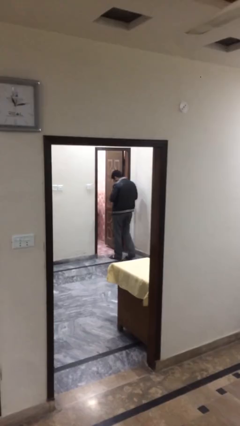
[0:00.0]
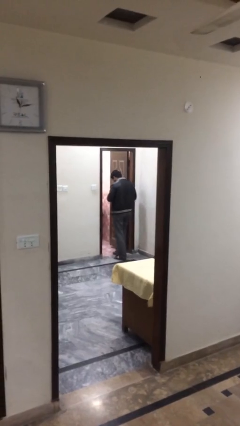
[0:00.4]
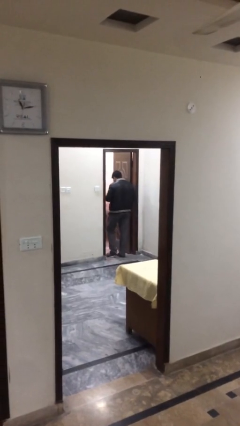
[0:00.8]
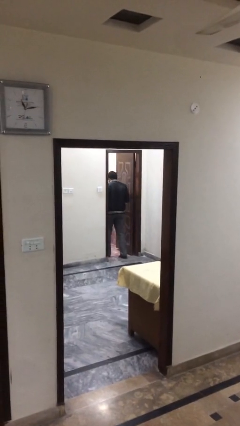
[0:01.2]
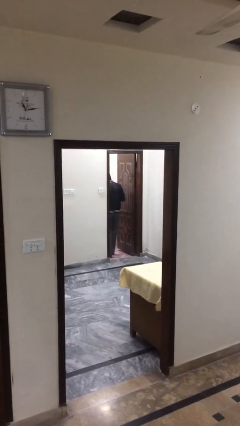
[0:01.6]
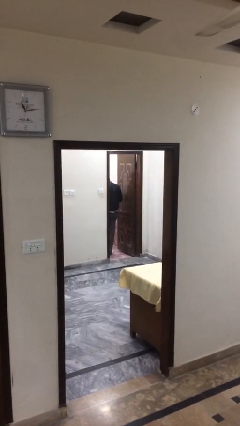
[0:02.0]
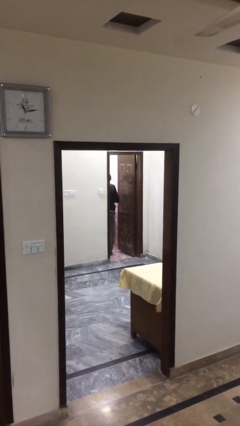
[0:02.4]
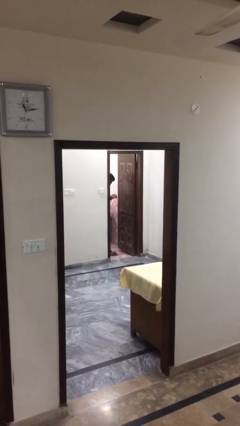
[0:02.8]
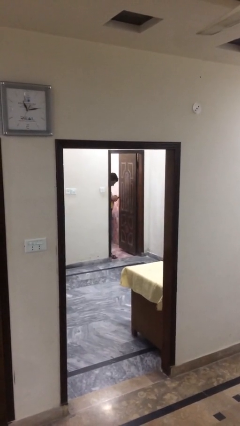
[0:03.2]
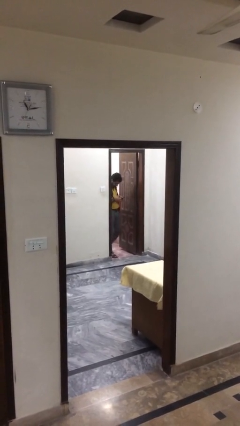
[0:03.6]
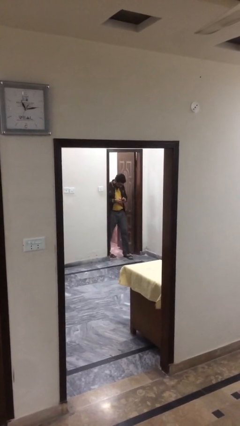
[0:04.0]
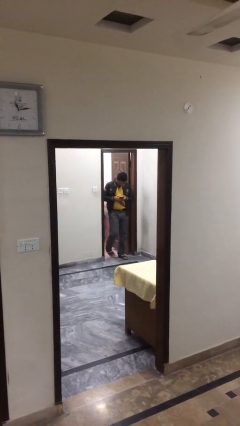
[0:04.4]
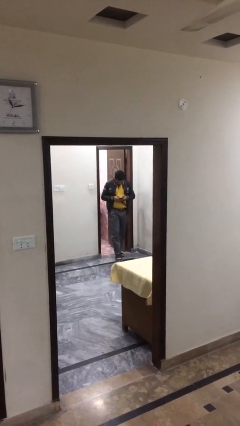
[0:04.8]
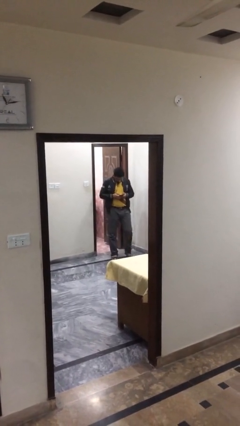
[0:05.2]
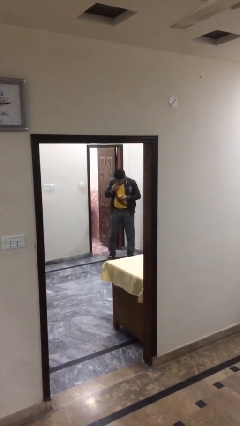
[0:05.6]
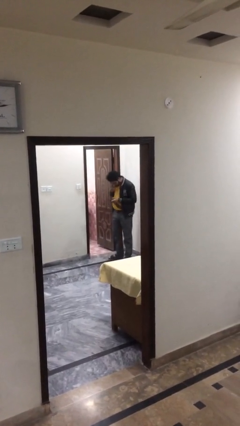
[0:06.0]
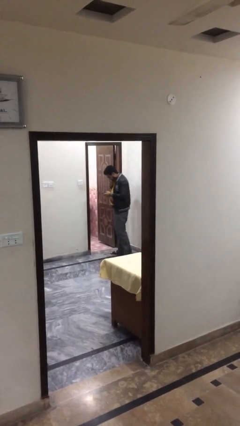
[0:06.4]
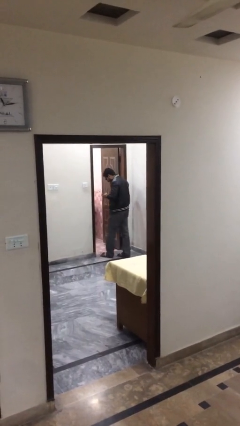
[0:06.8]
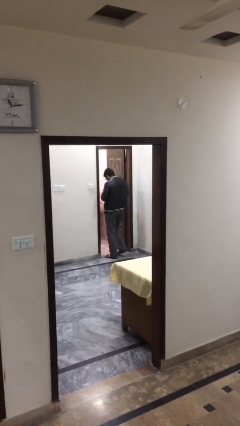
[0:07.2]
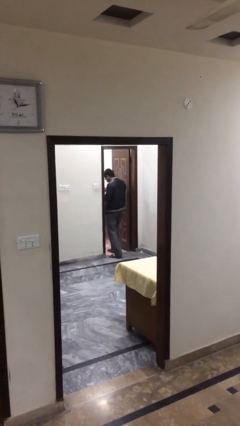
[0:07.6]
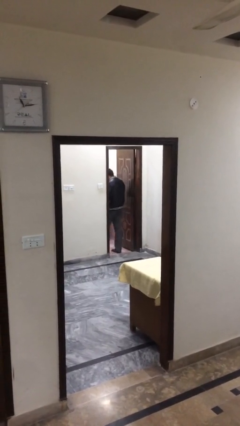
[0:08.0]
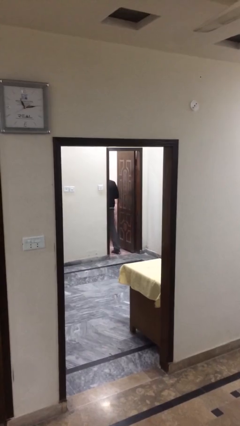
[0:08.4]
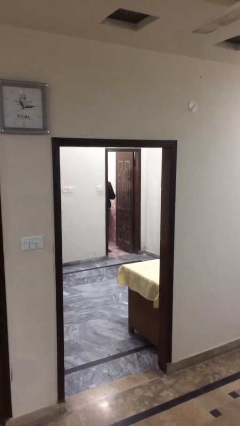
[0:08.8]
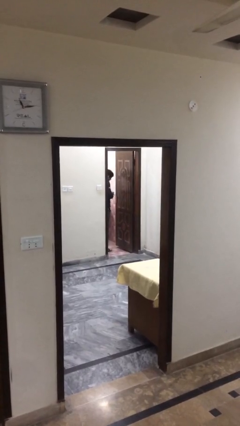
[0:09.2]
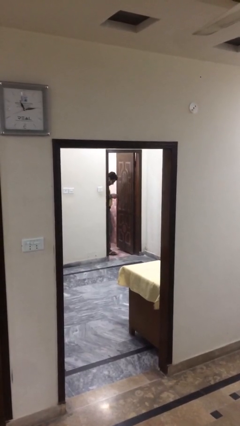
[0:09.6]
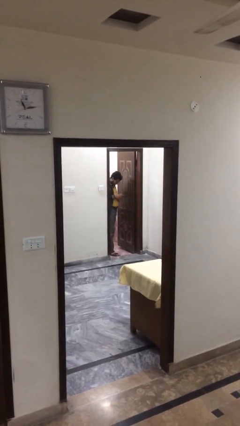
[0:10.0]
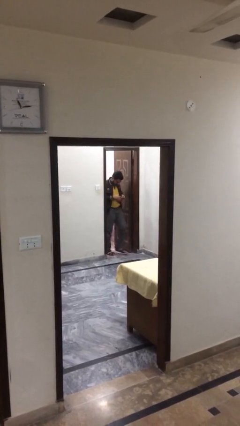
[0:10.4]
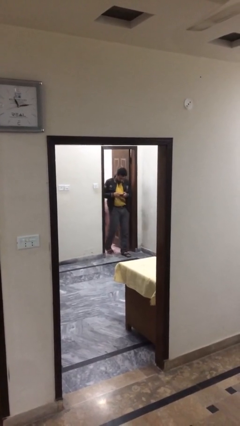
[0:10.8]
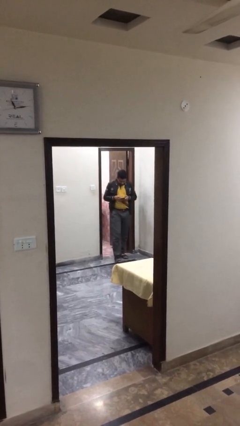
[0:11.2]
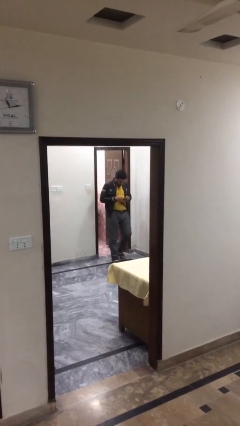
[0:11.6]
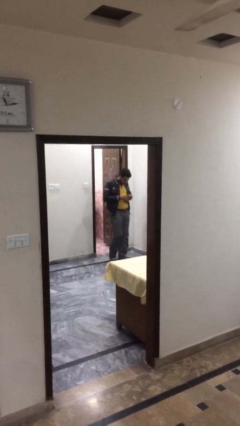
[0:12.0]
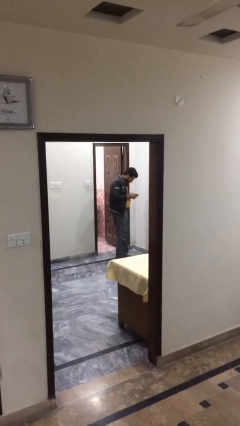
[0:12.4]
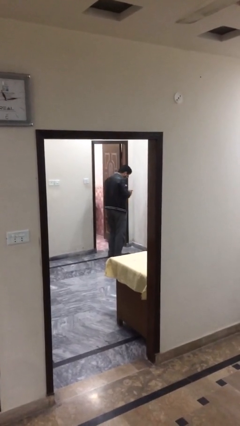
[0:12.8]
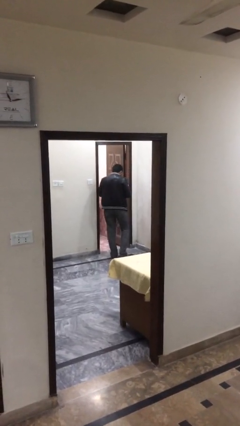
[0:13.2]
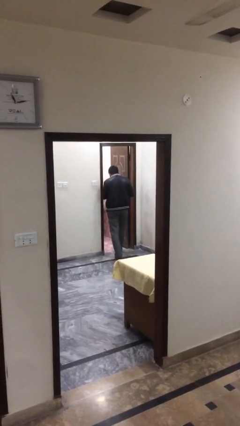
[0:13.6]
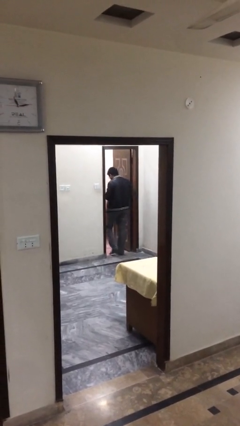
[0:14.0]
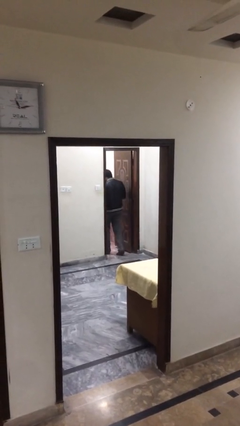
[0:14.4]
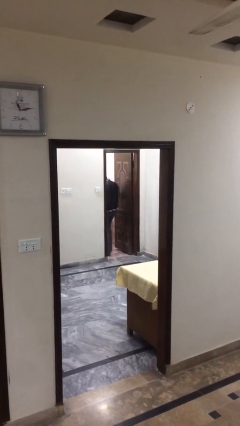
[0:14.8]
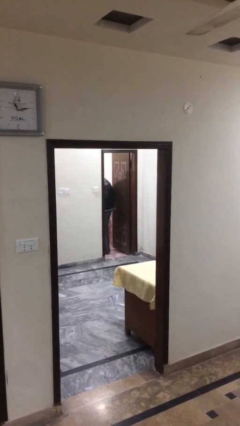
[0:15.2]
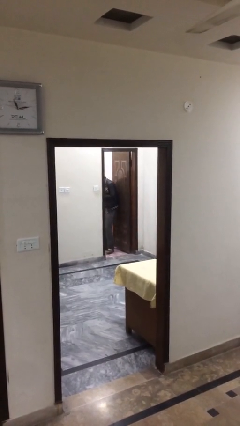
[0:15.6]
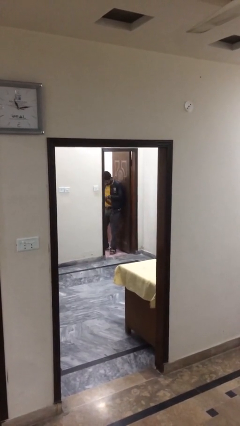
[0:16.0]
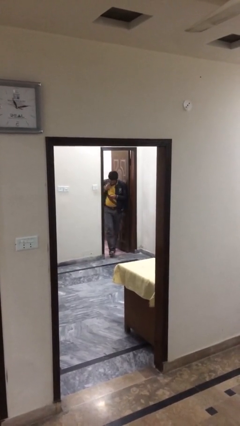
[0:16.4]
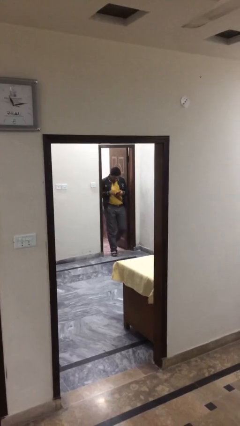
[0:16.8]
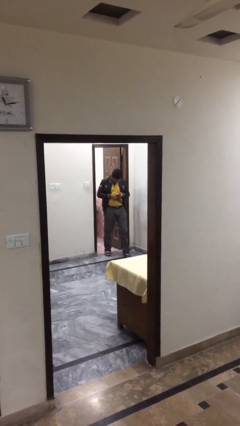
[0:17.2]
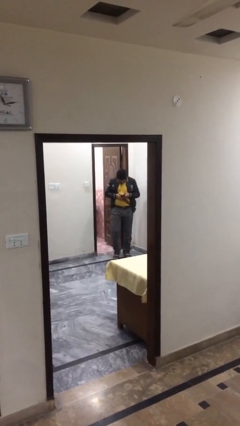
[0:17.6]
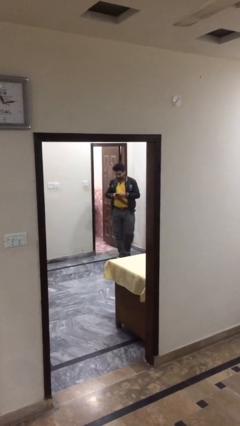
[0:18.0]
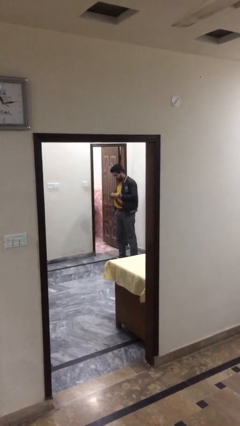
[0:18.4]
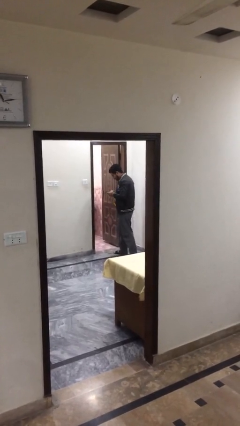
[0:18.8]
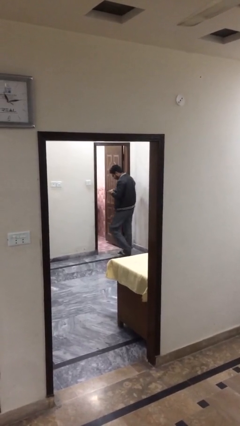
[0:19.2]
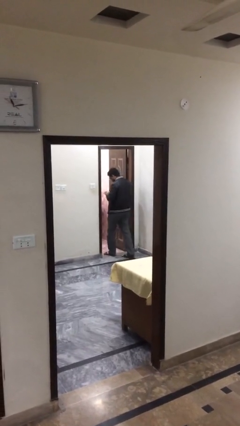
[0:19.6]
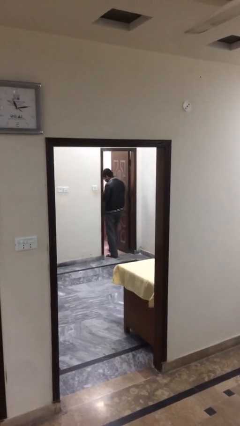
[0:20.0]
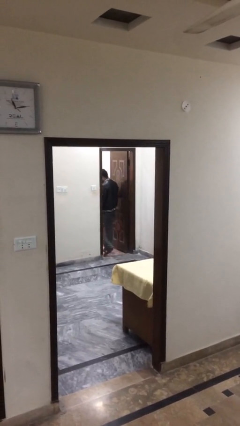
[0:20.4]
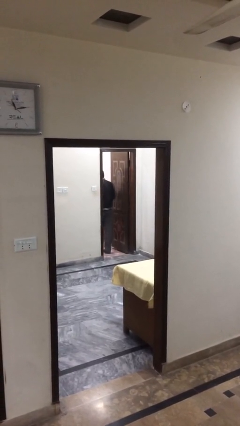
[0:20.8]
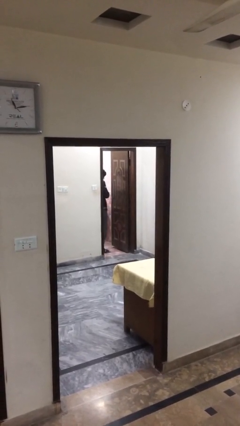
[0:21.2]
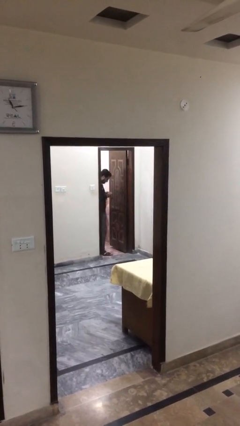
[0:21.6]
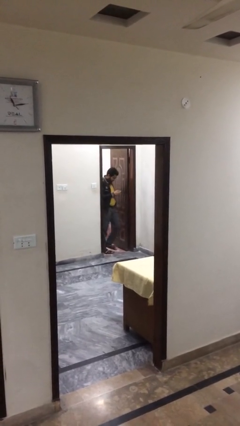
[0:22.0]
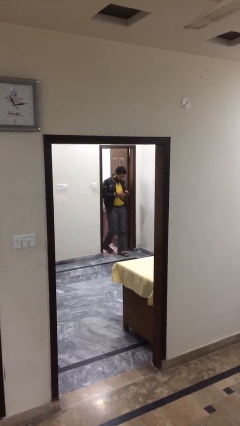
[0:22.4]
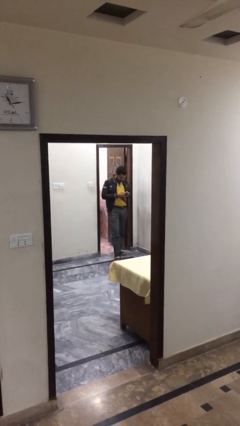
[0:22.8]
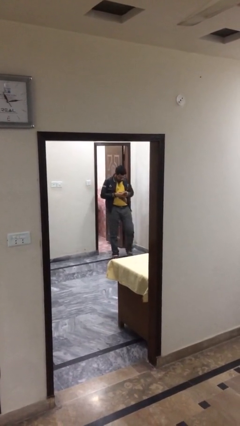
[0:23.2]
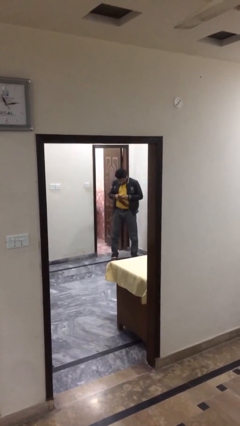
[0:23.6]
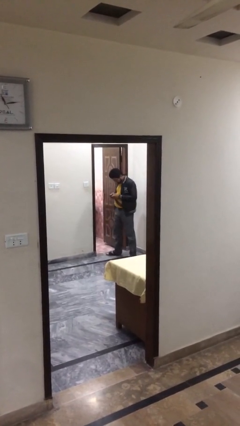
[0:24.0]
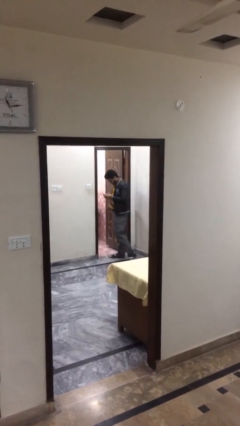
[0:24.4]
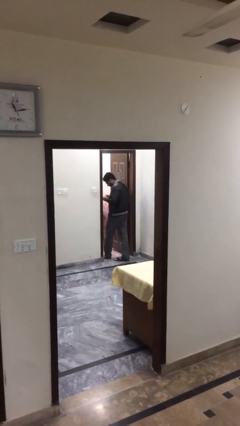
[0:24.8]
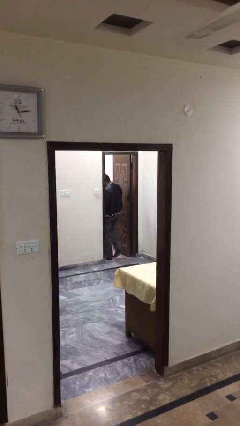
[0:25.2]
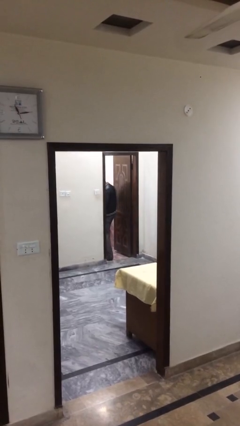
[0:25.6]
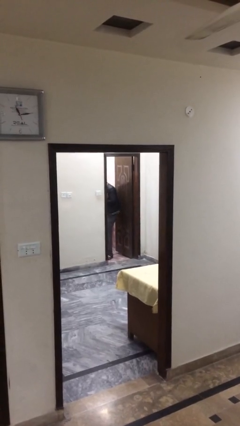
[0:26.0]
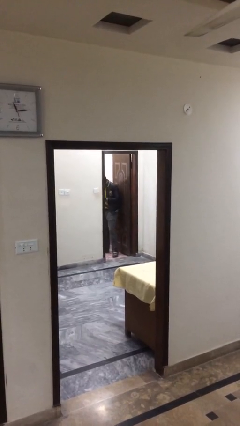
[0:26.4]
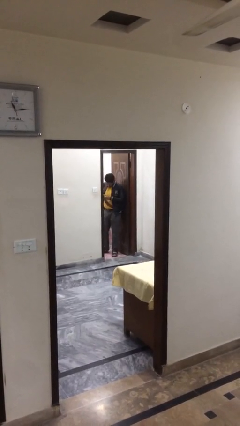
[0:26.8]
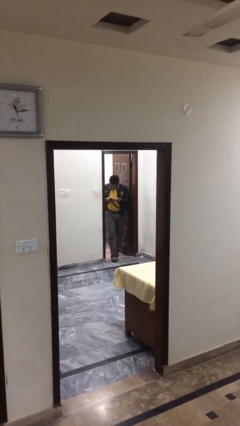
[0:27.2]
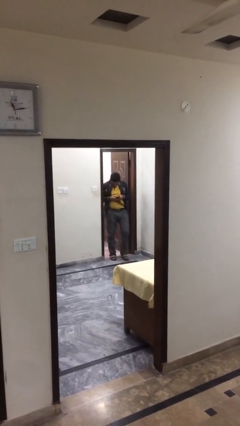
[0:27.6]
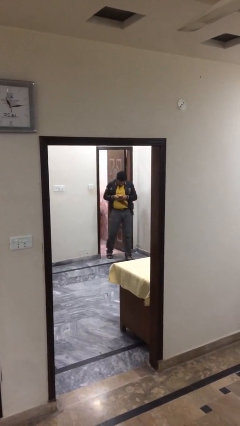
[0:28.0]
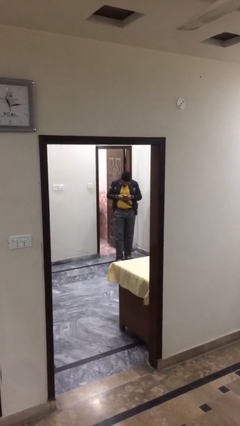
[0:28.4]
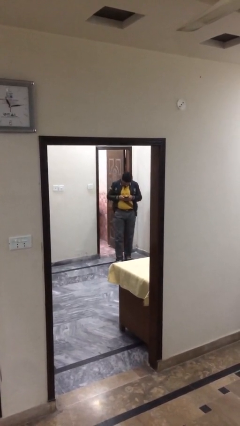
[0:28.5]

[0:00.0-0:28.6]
person texts on phone

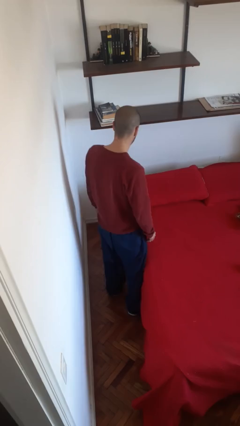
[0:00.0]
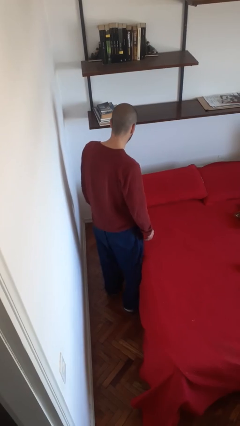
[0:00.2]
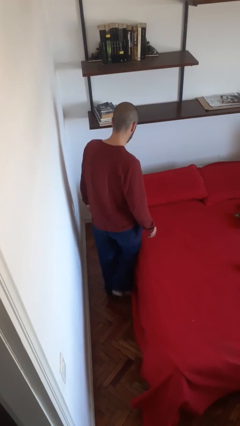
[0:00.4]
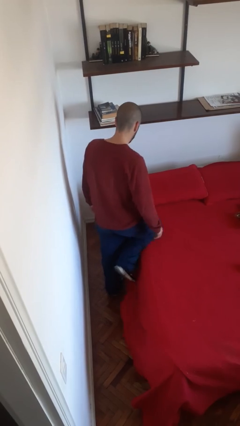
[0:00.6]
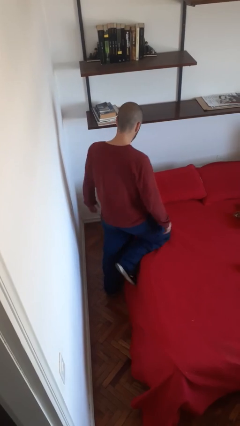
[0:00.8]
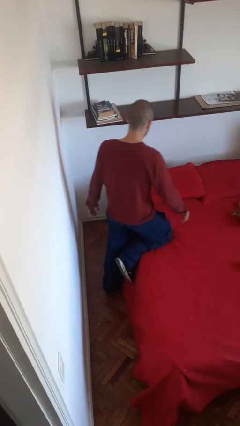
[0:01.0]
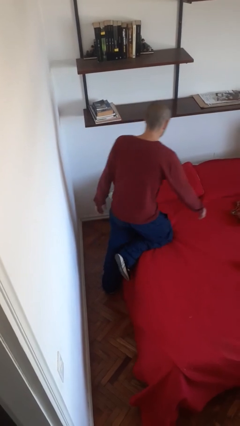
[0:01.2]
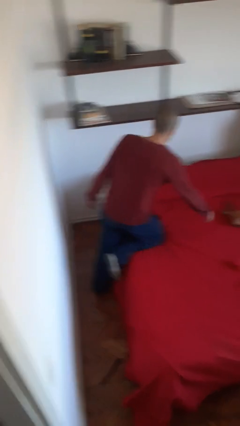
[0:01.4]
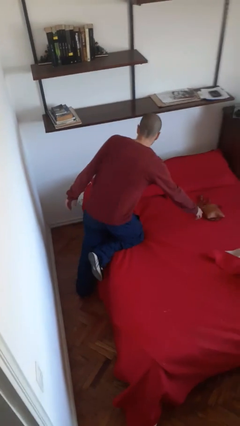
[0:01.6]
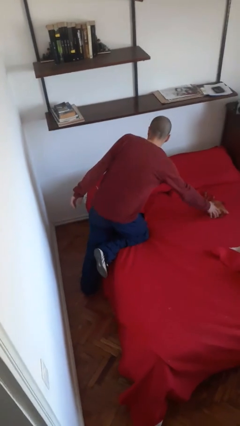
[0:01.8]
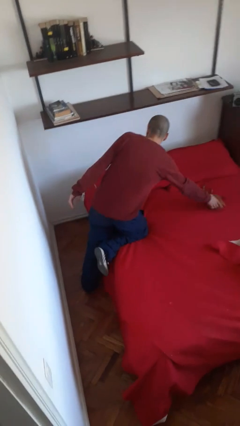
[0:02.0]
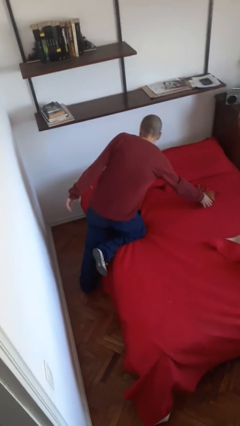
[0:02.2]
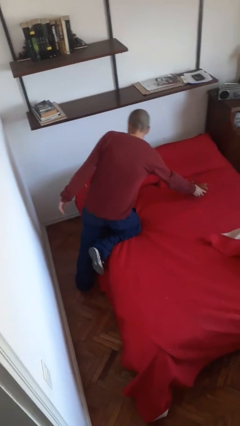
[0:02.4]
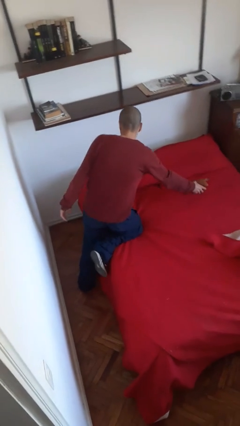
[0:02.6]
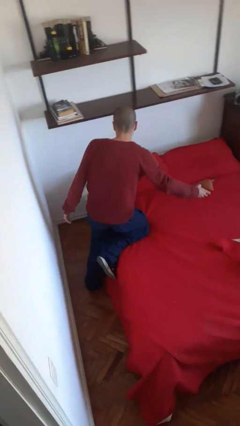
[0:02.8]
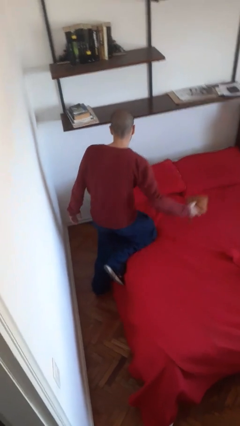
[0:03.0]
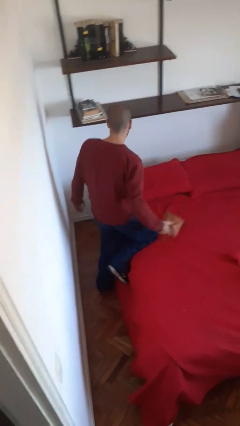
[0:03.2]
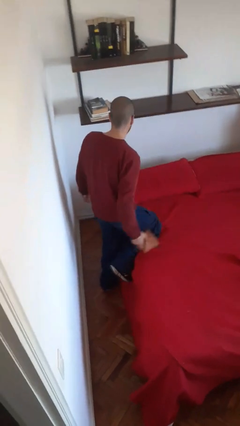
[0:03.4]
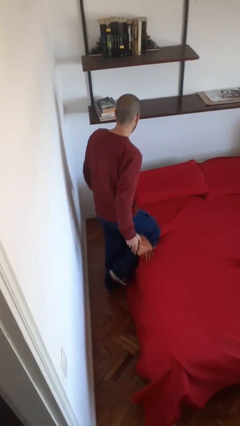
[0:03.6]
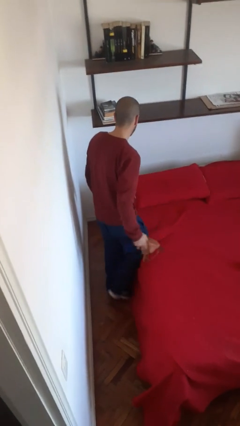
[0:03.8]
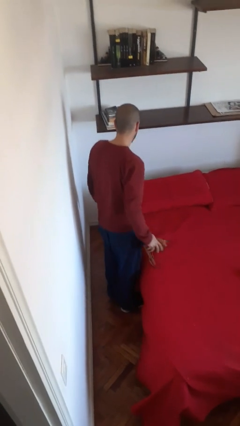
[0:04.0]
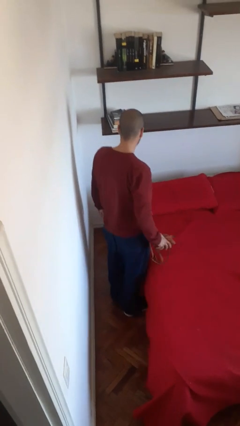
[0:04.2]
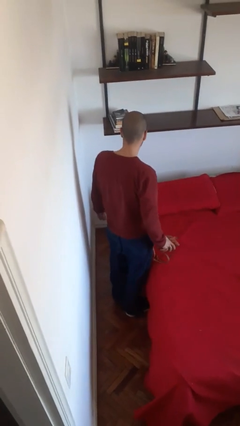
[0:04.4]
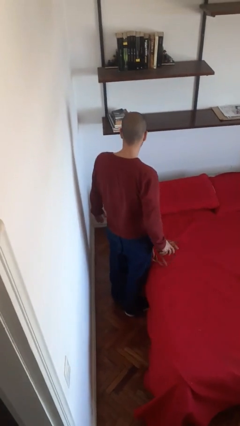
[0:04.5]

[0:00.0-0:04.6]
person picks up object from bed
